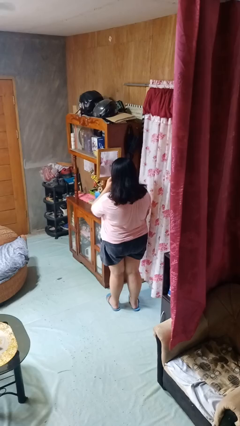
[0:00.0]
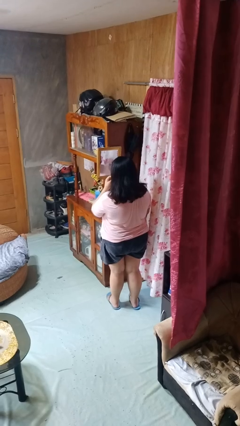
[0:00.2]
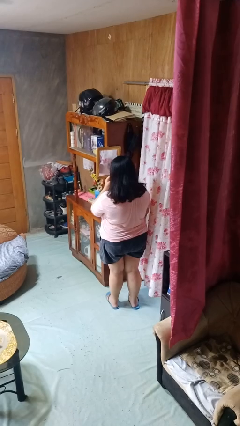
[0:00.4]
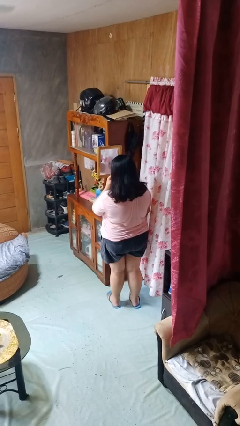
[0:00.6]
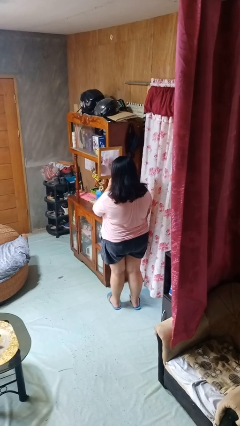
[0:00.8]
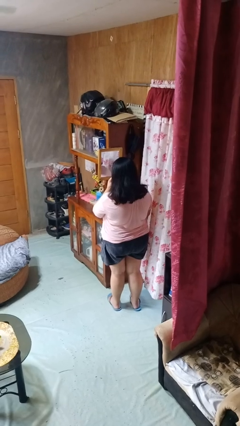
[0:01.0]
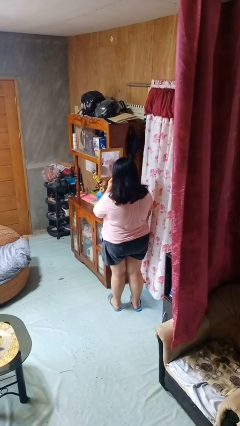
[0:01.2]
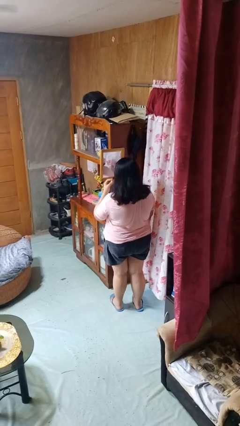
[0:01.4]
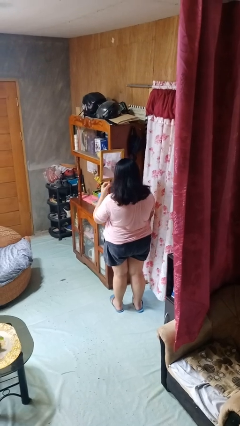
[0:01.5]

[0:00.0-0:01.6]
person applies lip makeup

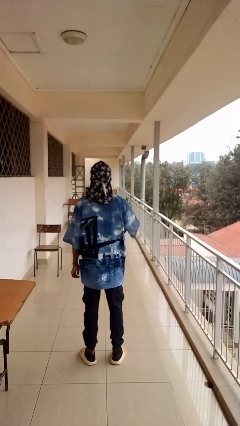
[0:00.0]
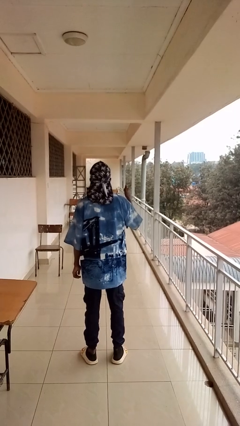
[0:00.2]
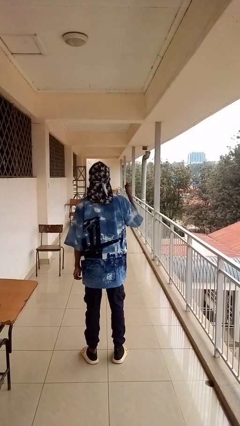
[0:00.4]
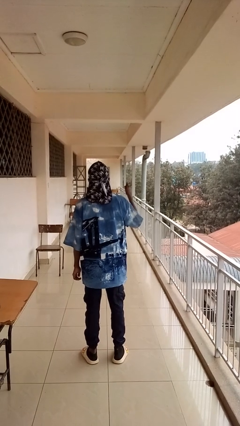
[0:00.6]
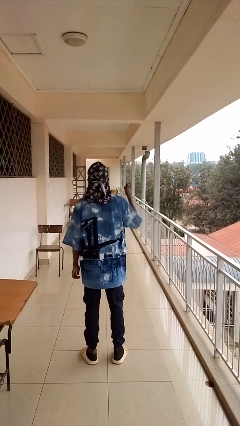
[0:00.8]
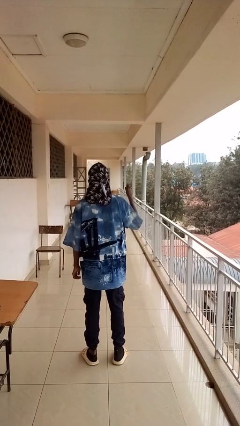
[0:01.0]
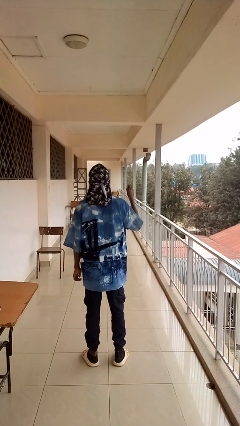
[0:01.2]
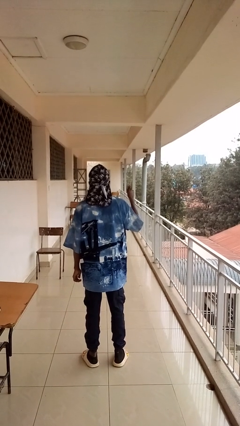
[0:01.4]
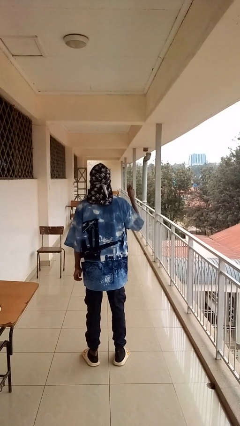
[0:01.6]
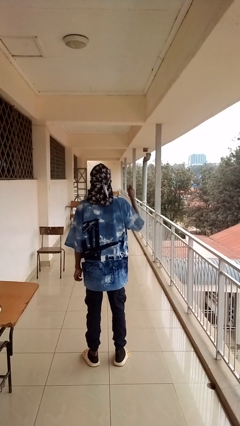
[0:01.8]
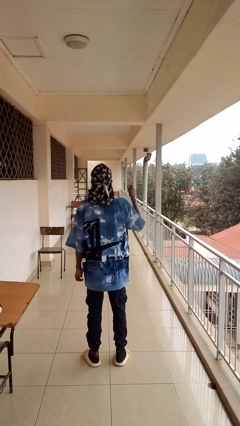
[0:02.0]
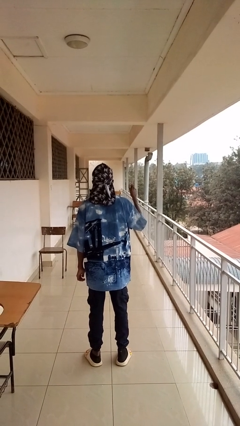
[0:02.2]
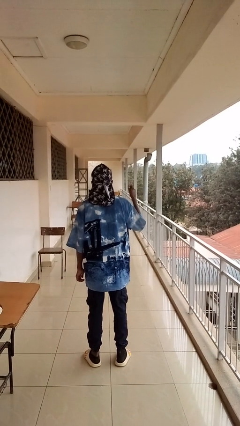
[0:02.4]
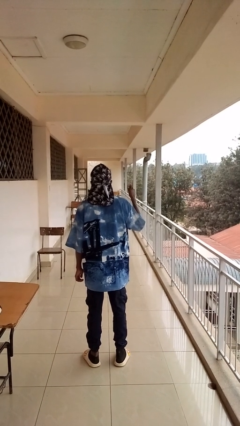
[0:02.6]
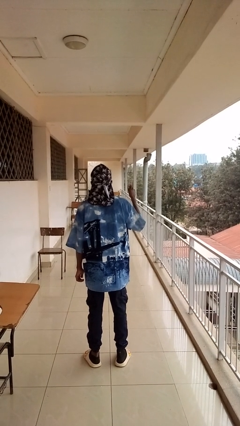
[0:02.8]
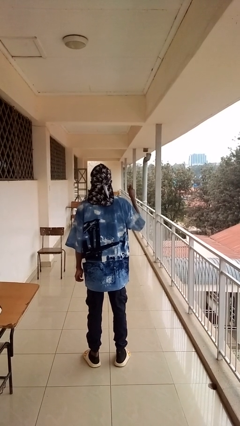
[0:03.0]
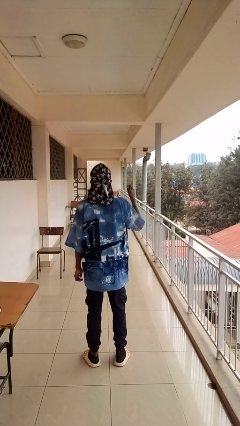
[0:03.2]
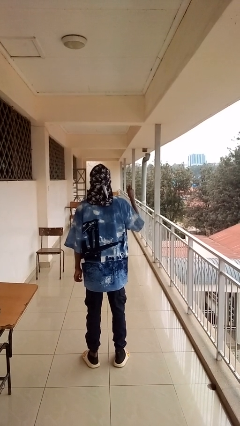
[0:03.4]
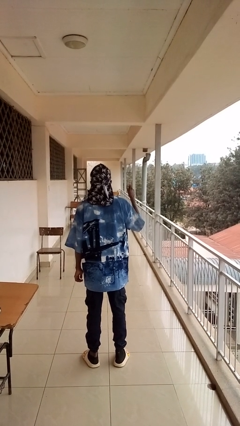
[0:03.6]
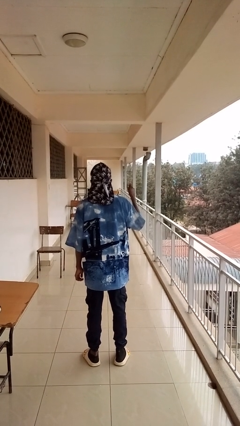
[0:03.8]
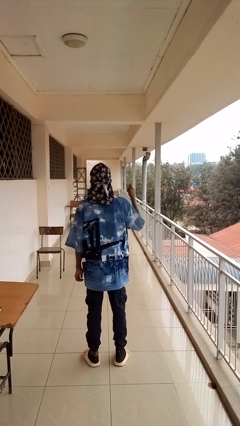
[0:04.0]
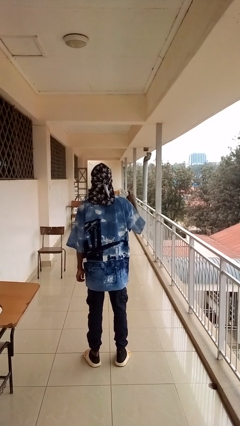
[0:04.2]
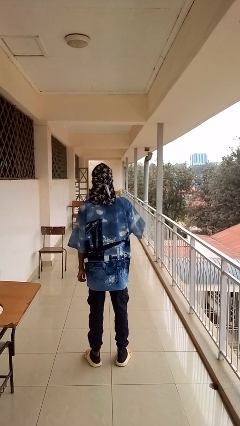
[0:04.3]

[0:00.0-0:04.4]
person gestures thumbs up

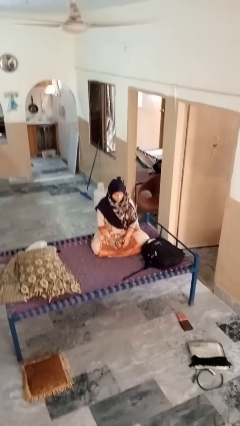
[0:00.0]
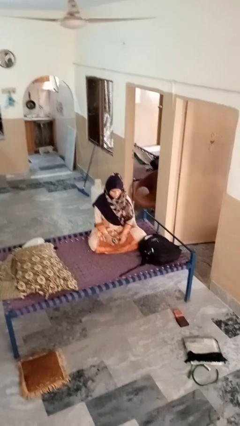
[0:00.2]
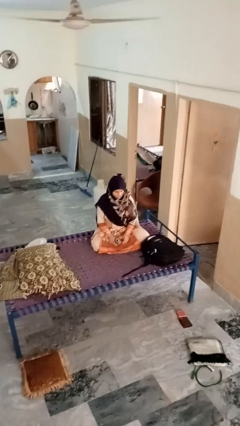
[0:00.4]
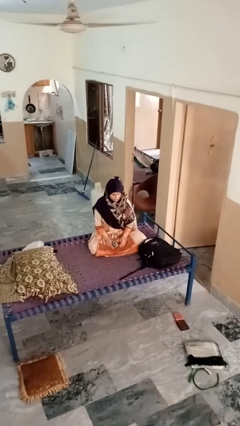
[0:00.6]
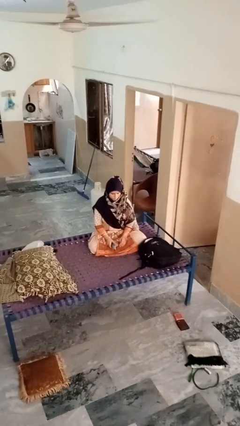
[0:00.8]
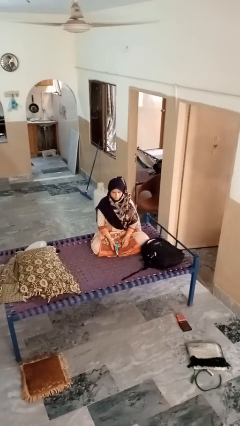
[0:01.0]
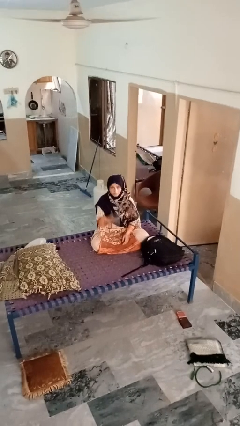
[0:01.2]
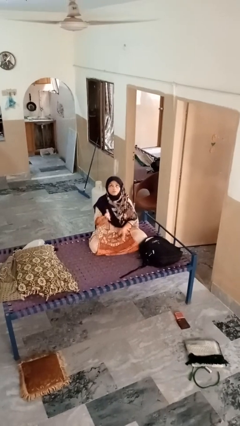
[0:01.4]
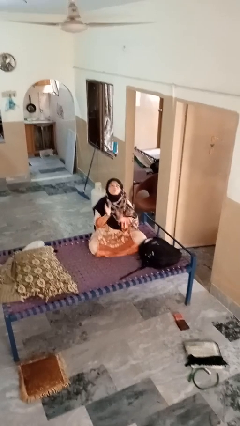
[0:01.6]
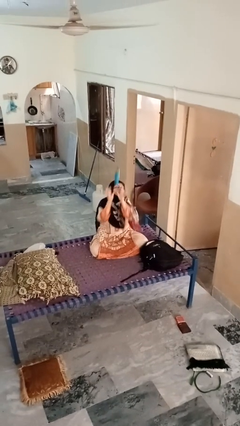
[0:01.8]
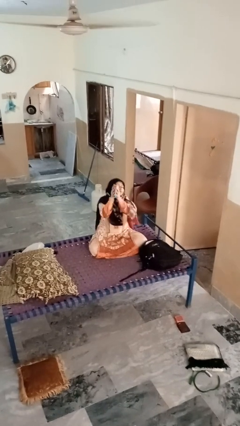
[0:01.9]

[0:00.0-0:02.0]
person drops object

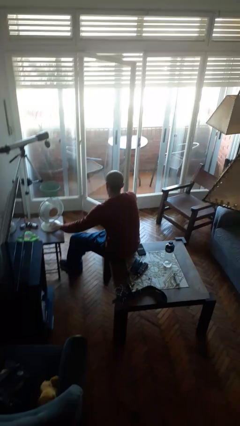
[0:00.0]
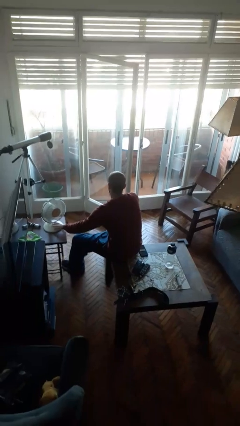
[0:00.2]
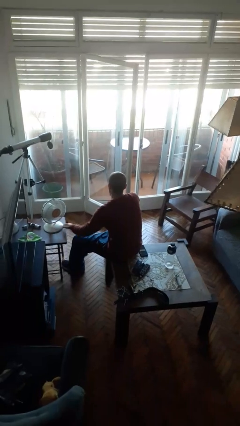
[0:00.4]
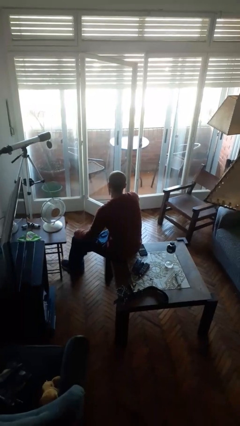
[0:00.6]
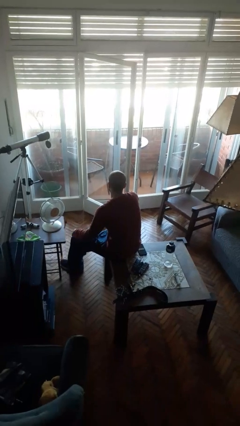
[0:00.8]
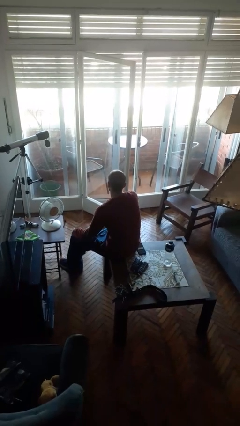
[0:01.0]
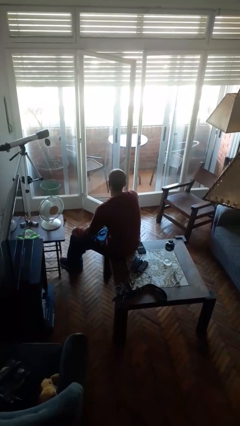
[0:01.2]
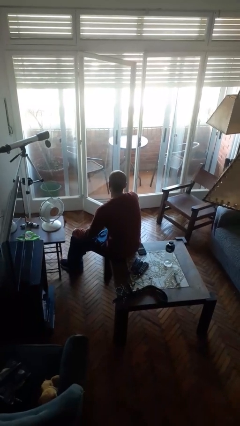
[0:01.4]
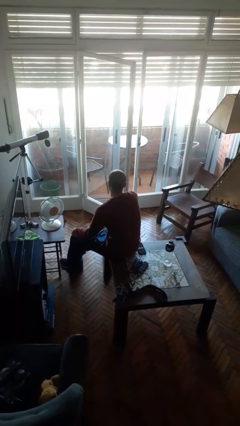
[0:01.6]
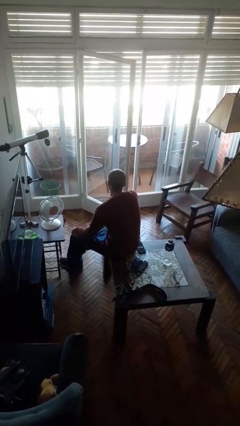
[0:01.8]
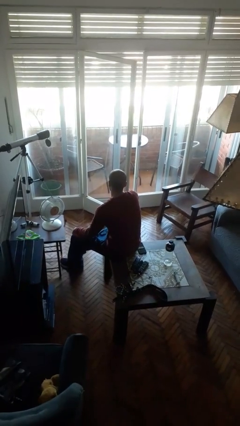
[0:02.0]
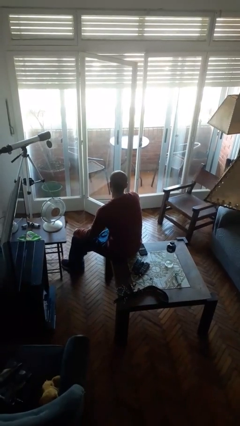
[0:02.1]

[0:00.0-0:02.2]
person turns off fan

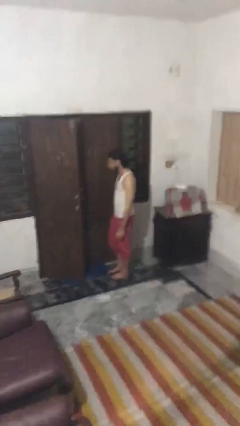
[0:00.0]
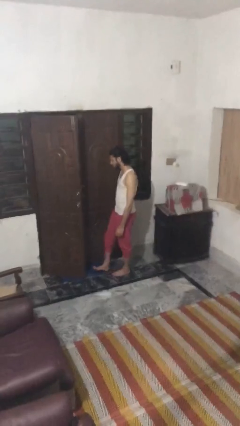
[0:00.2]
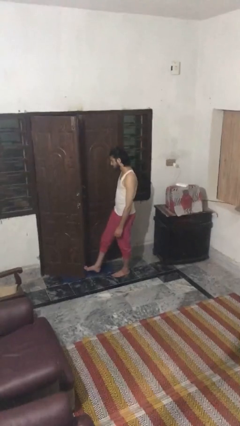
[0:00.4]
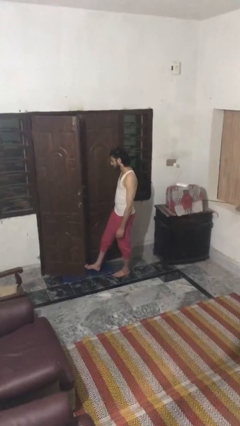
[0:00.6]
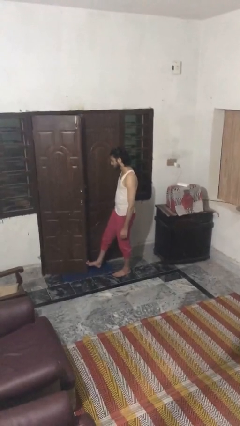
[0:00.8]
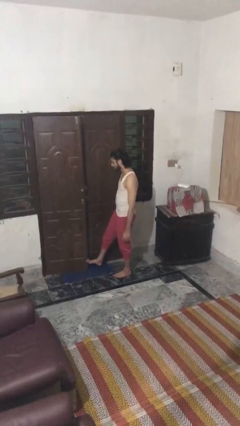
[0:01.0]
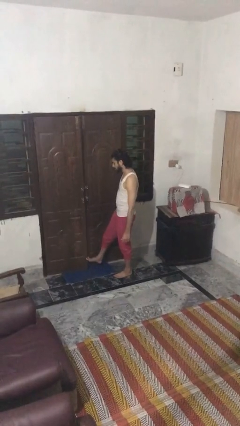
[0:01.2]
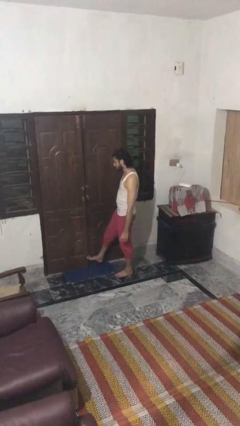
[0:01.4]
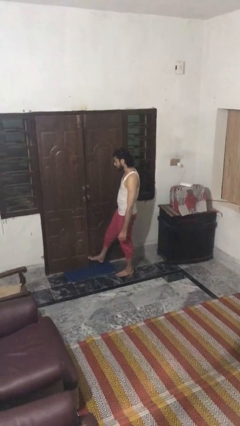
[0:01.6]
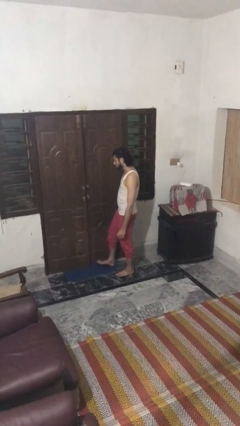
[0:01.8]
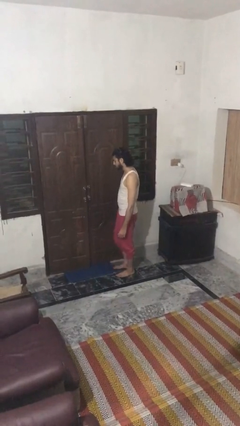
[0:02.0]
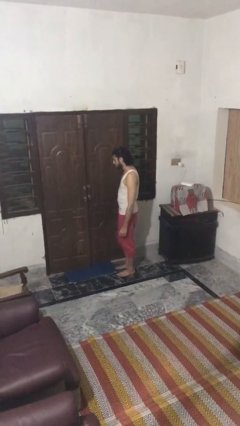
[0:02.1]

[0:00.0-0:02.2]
person closes door with foot

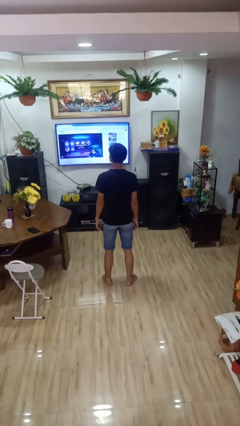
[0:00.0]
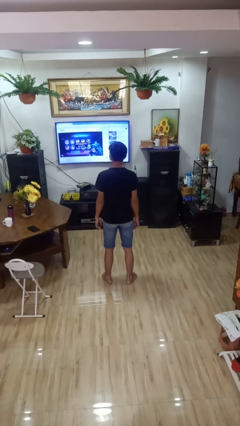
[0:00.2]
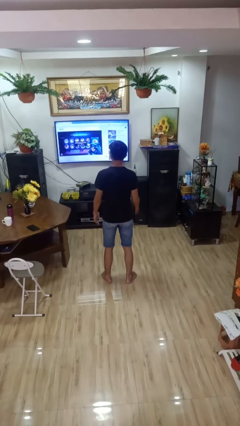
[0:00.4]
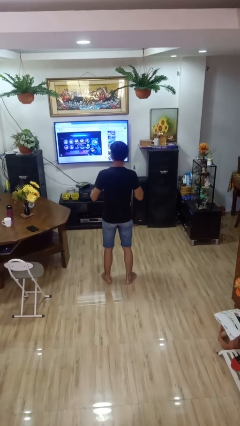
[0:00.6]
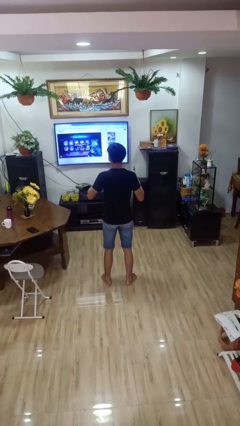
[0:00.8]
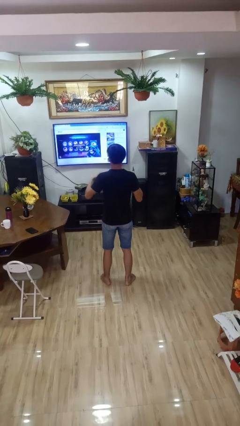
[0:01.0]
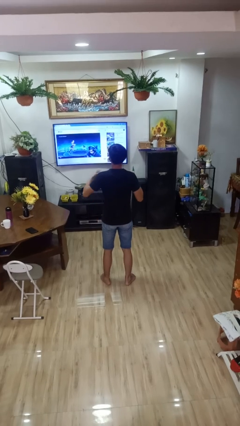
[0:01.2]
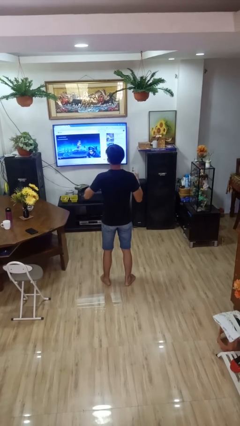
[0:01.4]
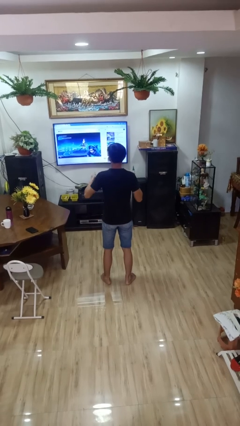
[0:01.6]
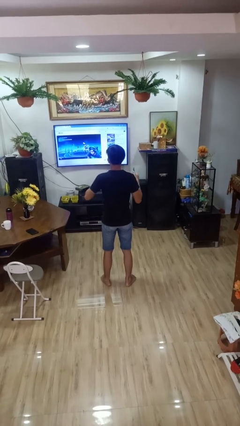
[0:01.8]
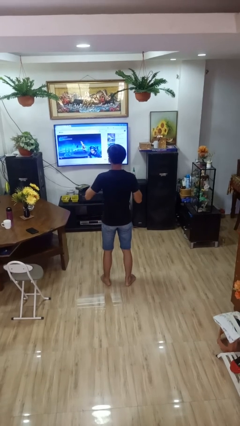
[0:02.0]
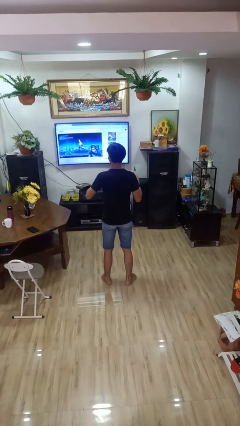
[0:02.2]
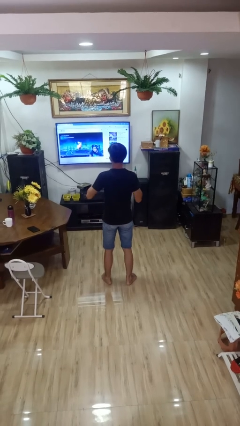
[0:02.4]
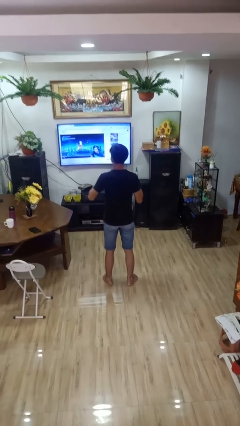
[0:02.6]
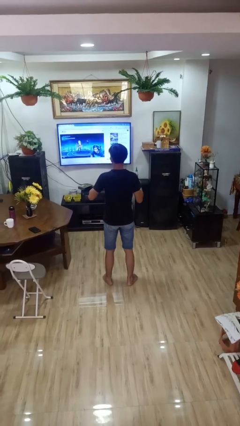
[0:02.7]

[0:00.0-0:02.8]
person drums on chest

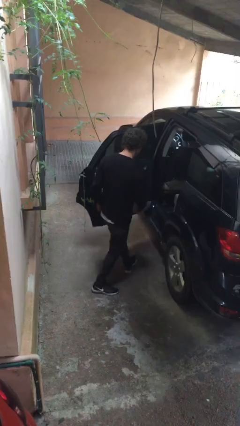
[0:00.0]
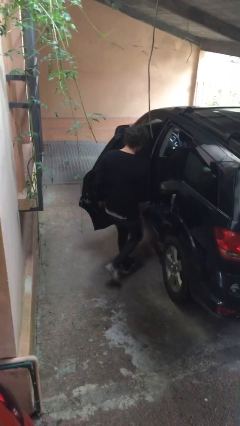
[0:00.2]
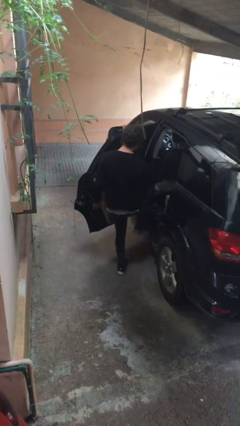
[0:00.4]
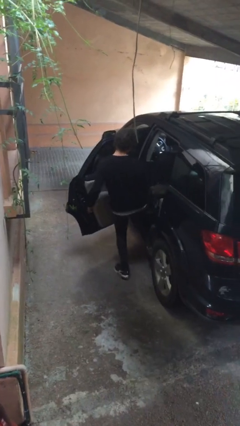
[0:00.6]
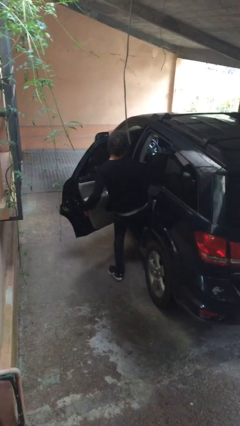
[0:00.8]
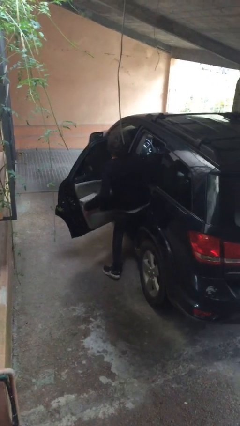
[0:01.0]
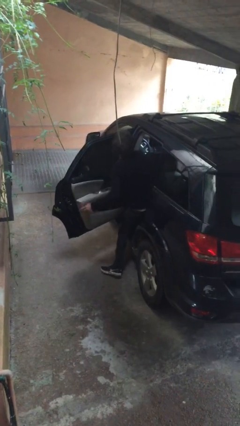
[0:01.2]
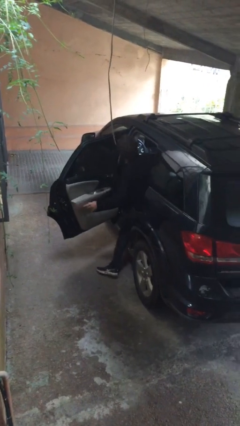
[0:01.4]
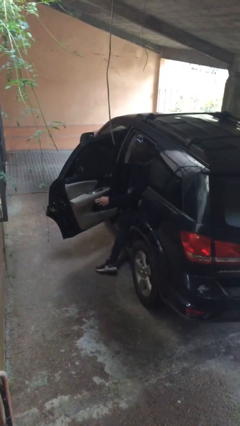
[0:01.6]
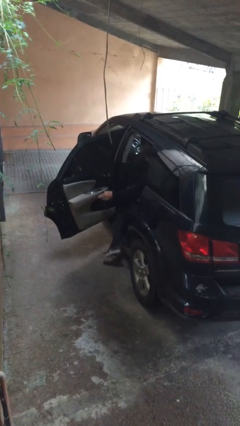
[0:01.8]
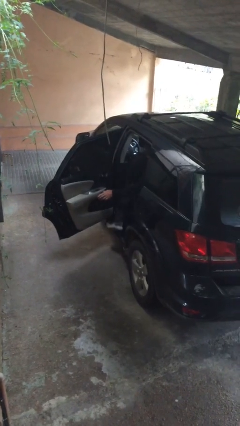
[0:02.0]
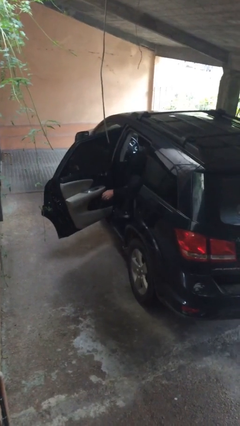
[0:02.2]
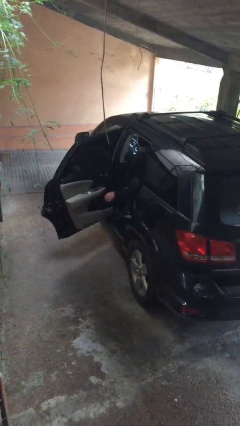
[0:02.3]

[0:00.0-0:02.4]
person enters car
